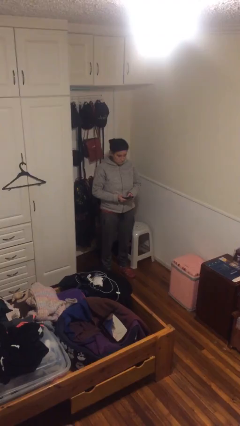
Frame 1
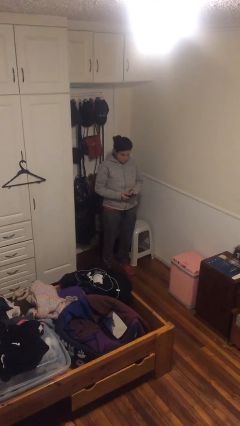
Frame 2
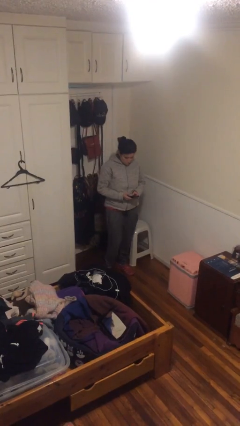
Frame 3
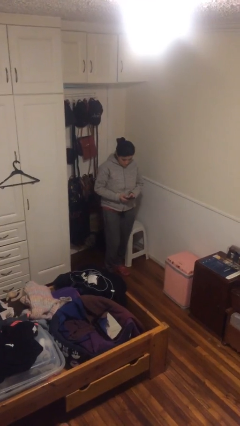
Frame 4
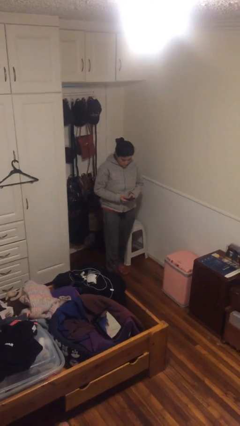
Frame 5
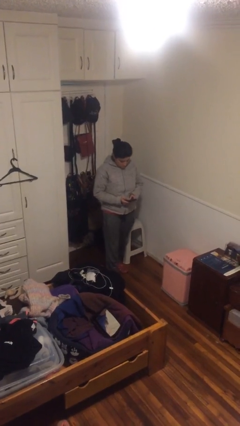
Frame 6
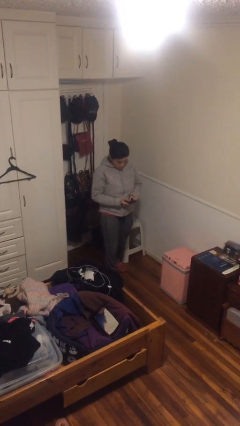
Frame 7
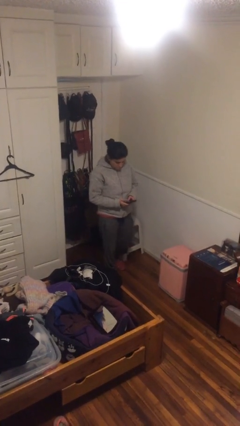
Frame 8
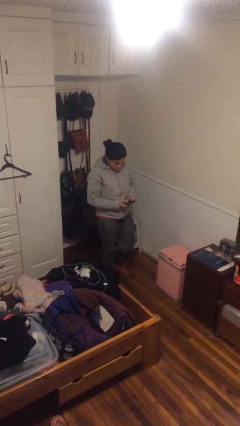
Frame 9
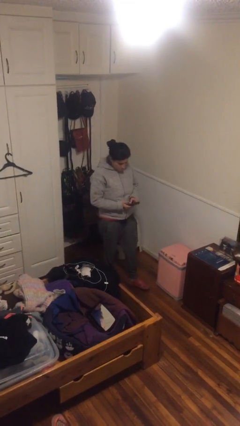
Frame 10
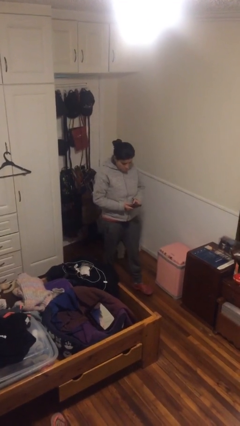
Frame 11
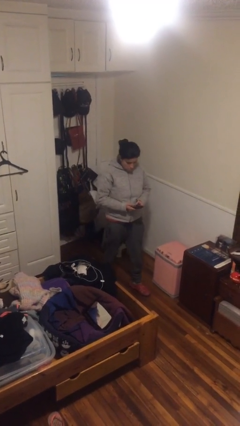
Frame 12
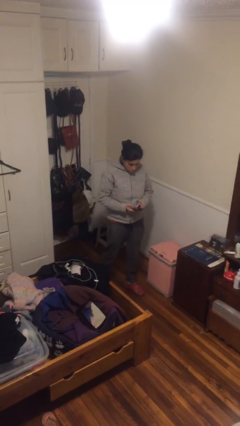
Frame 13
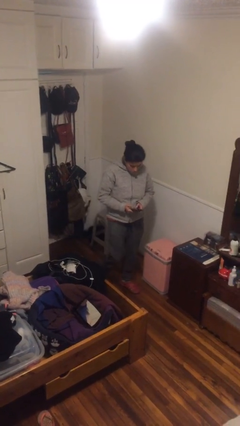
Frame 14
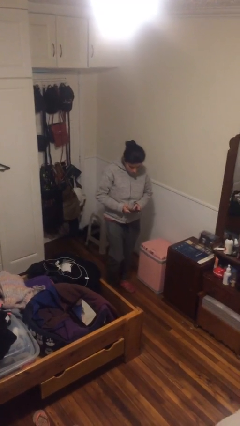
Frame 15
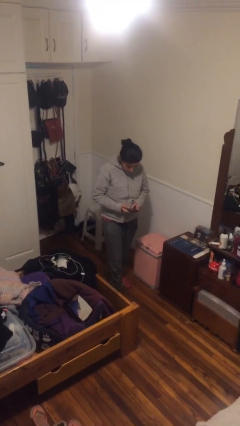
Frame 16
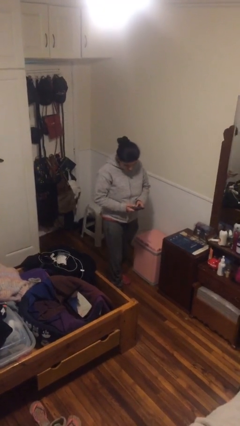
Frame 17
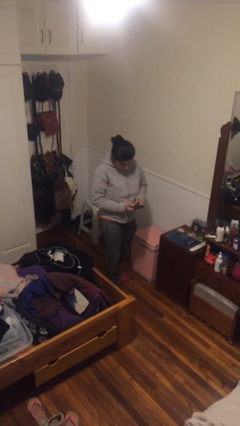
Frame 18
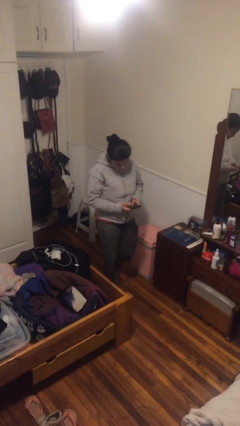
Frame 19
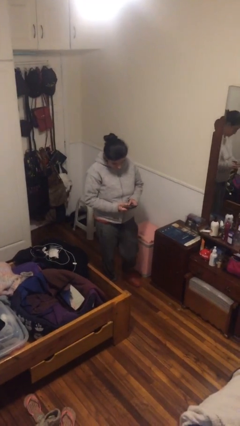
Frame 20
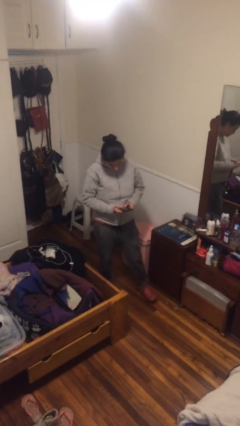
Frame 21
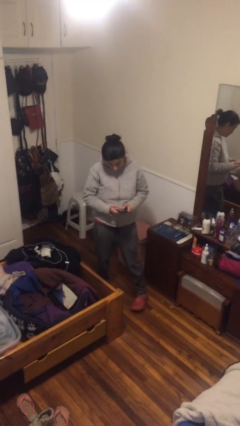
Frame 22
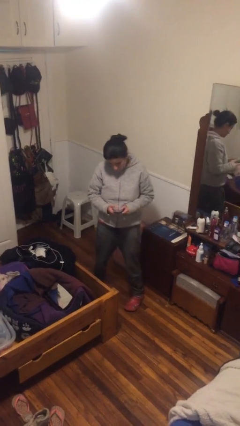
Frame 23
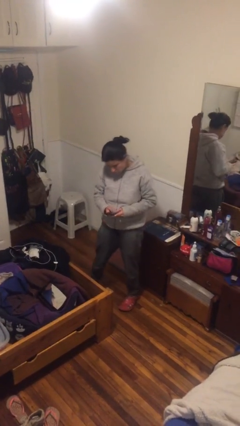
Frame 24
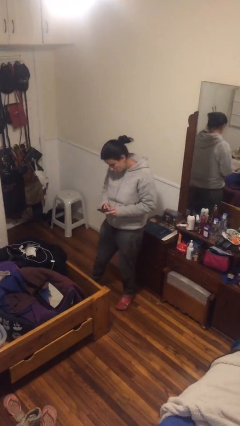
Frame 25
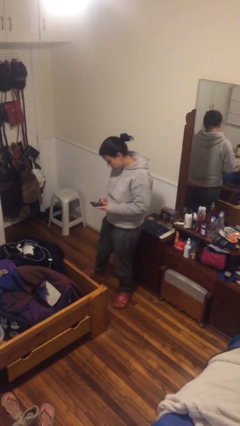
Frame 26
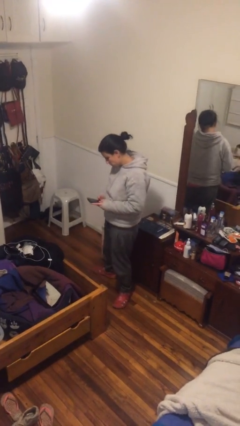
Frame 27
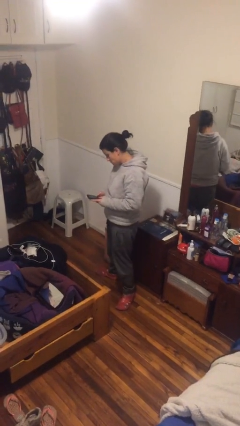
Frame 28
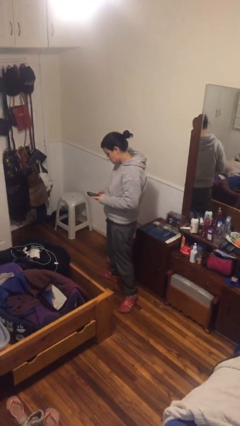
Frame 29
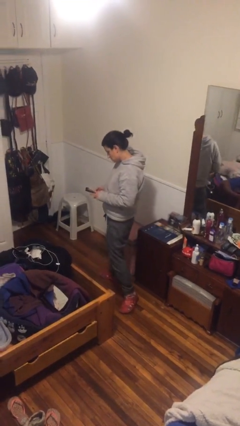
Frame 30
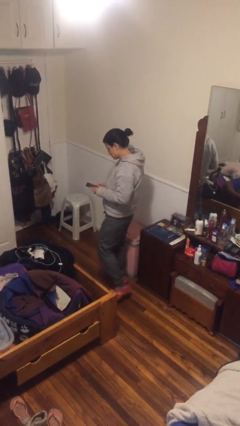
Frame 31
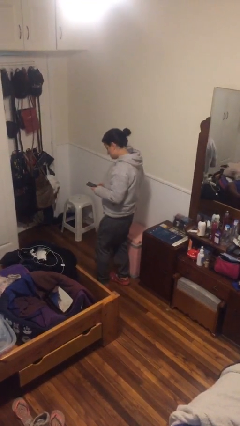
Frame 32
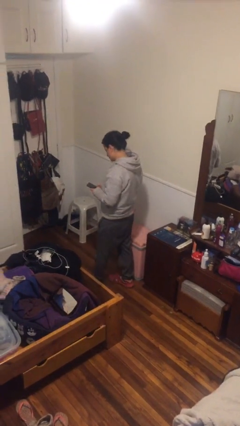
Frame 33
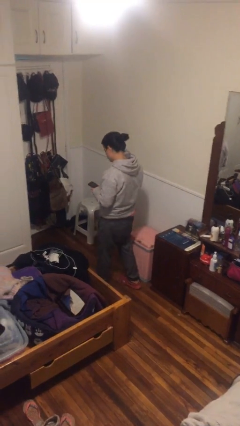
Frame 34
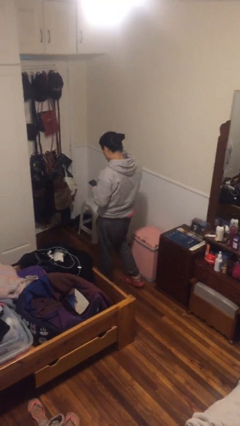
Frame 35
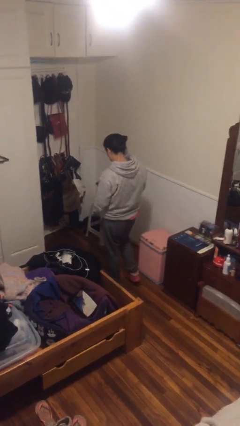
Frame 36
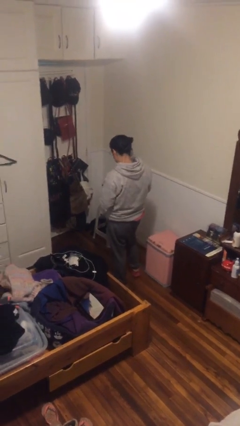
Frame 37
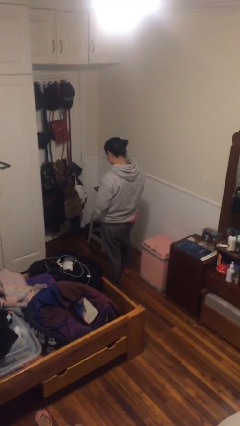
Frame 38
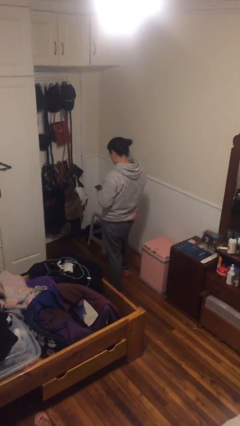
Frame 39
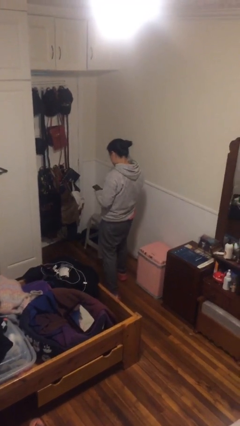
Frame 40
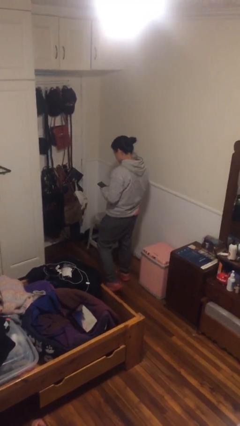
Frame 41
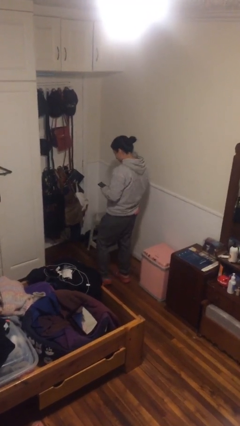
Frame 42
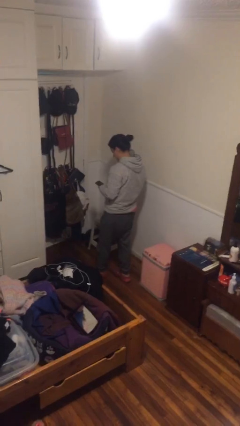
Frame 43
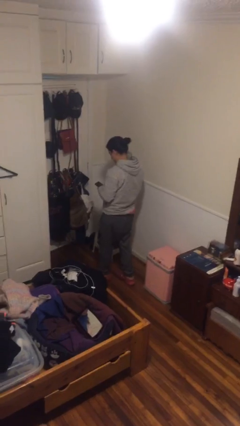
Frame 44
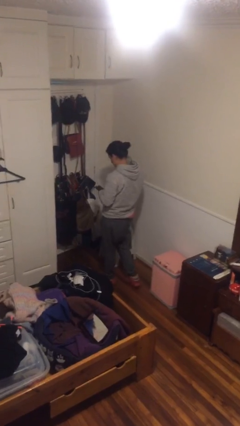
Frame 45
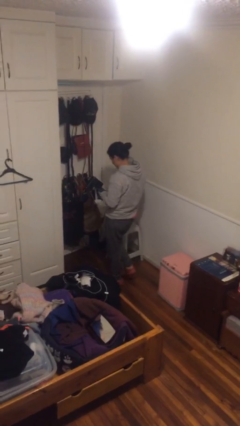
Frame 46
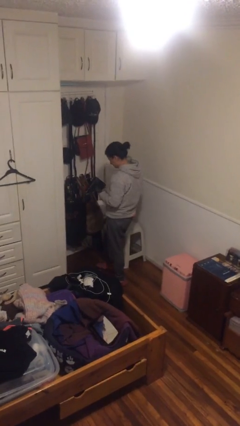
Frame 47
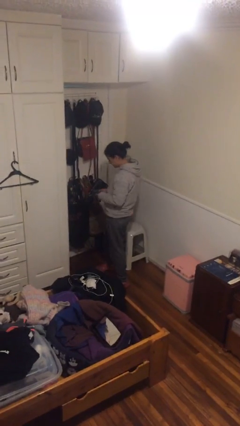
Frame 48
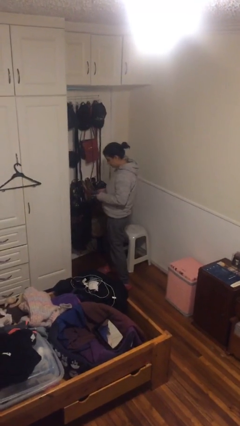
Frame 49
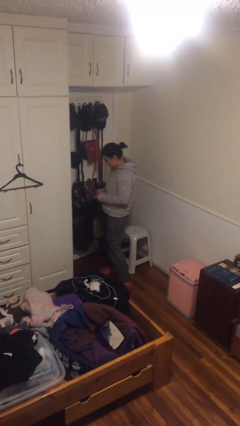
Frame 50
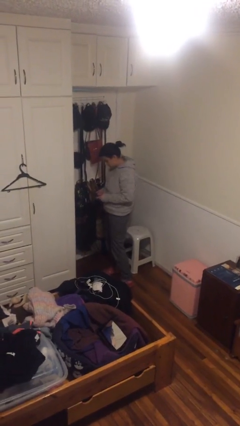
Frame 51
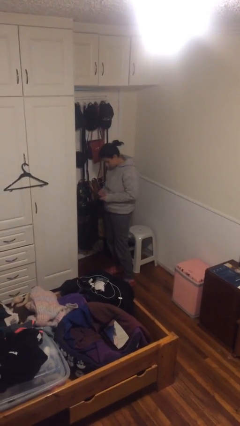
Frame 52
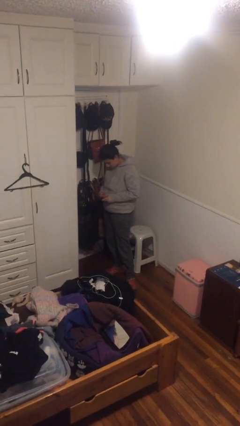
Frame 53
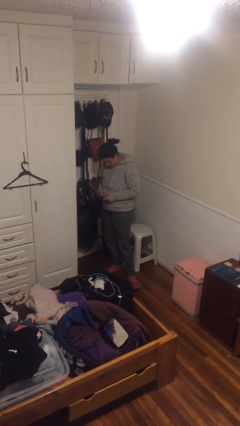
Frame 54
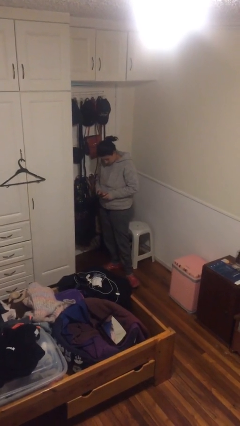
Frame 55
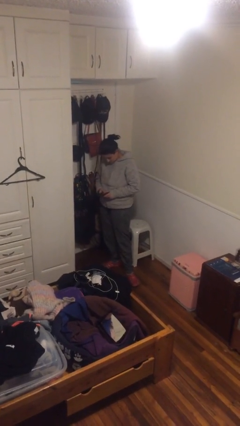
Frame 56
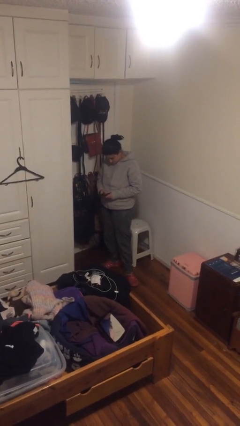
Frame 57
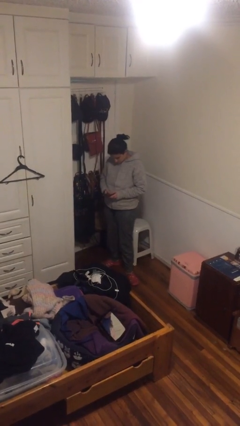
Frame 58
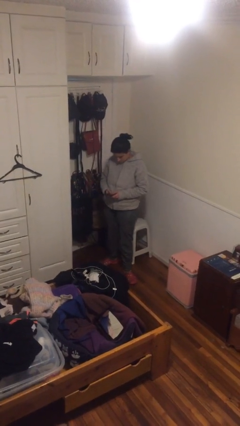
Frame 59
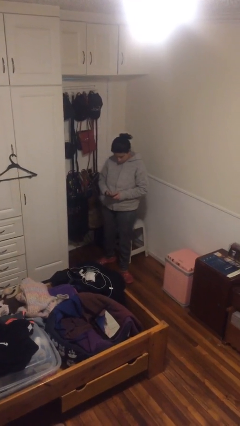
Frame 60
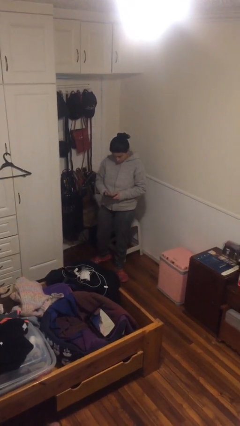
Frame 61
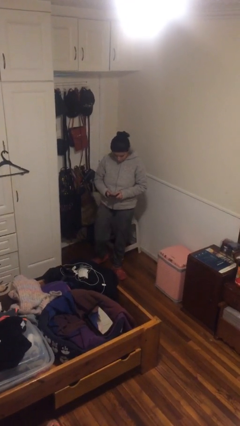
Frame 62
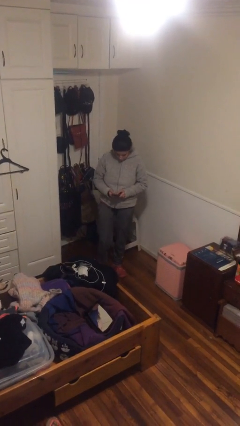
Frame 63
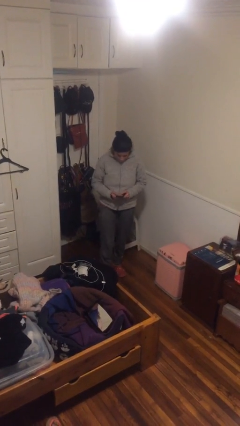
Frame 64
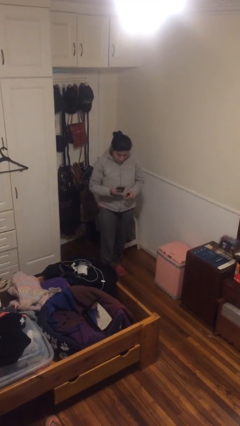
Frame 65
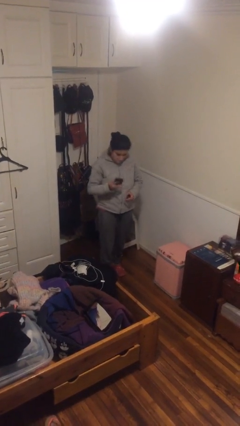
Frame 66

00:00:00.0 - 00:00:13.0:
person texts on phone

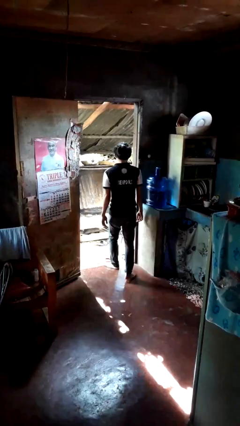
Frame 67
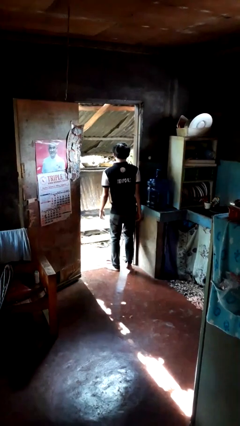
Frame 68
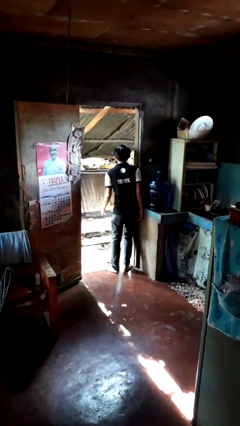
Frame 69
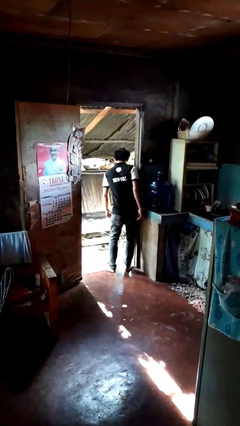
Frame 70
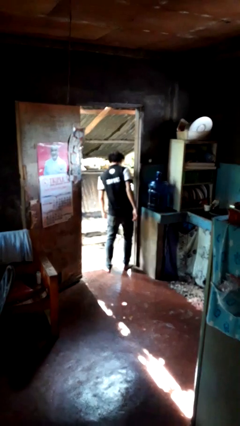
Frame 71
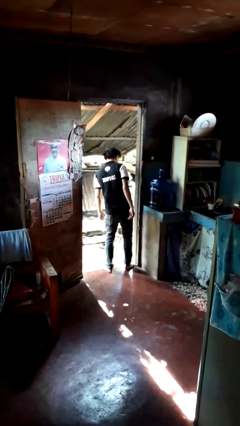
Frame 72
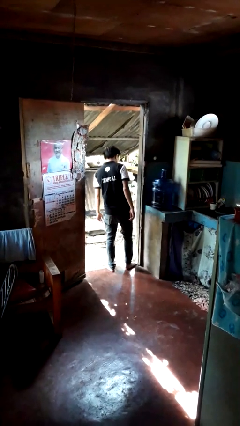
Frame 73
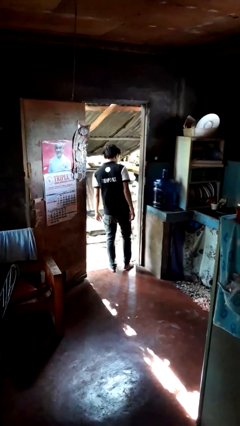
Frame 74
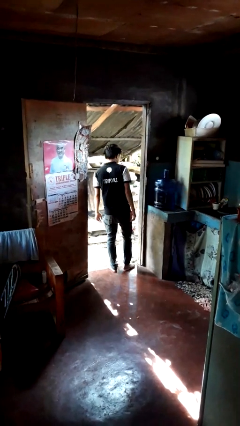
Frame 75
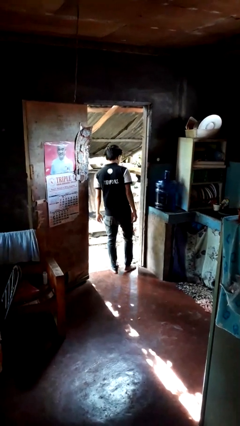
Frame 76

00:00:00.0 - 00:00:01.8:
person bumps into wall

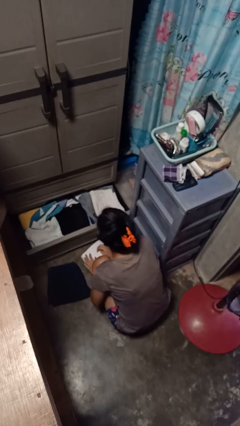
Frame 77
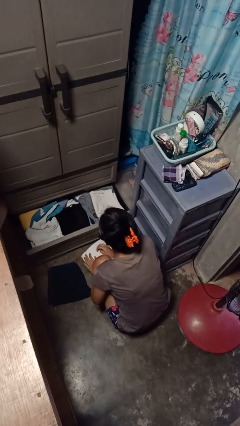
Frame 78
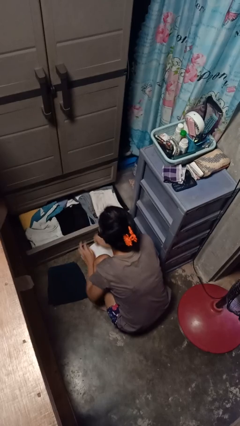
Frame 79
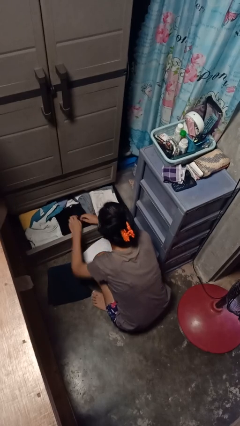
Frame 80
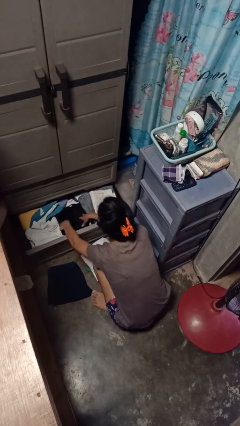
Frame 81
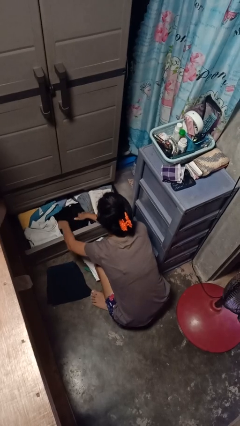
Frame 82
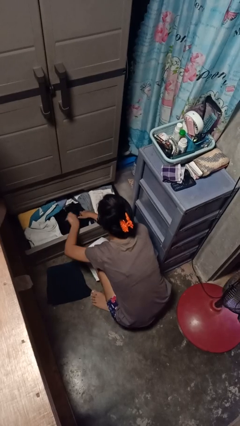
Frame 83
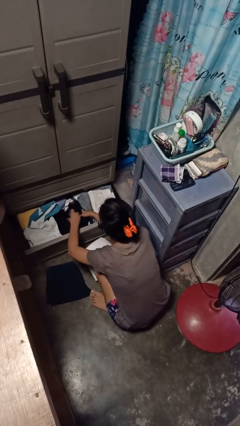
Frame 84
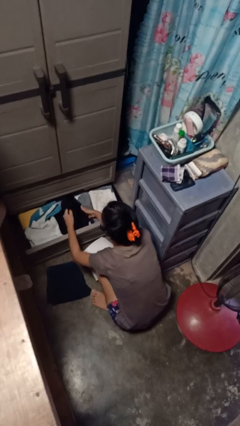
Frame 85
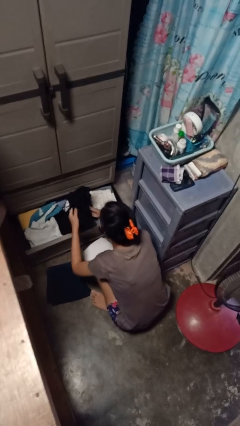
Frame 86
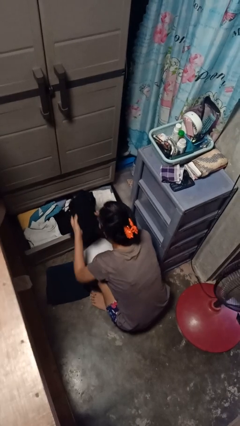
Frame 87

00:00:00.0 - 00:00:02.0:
person takes clothes from dresser

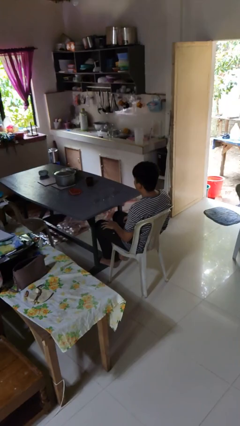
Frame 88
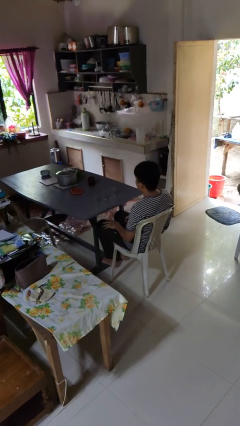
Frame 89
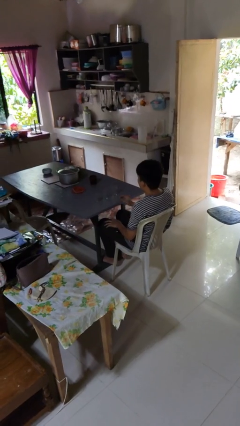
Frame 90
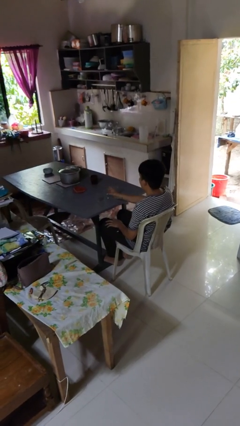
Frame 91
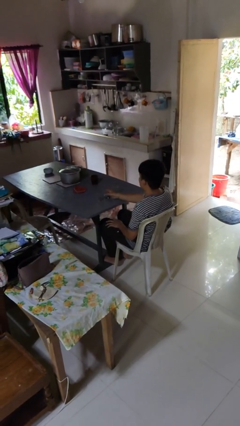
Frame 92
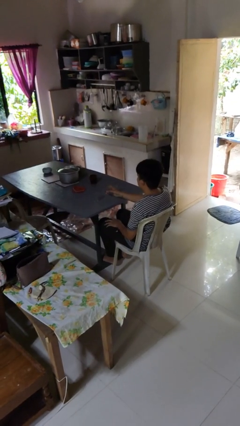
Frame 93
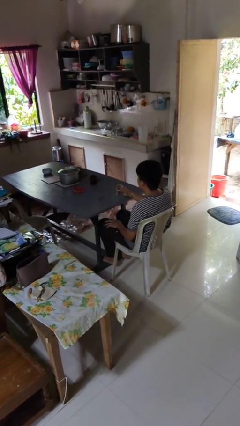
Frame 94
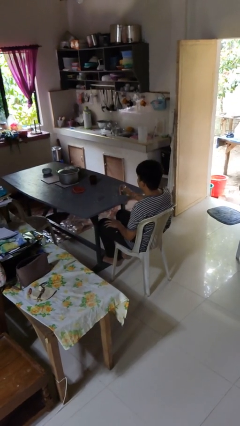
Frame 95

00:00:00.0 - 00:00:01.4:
person picks up object from table
